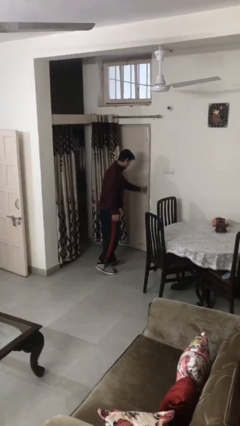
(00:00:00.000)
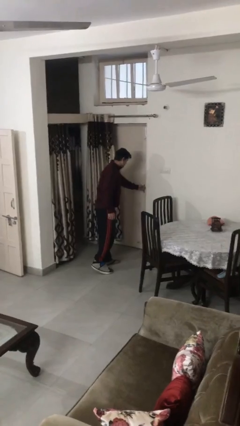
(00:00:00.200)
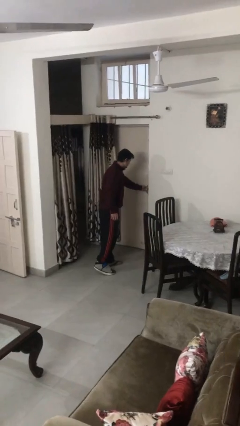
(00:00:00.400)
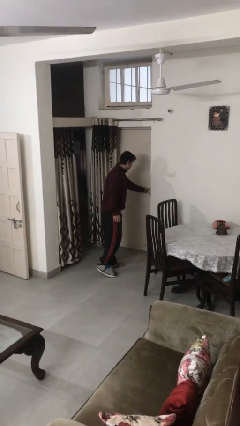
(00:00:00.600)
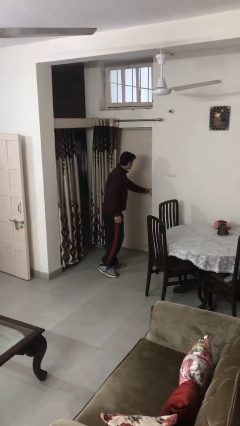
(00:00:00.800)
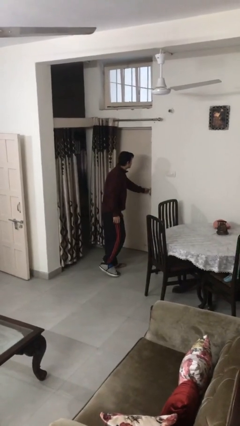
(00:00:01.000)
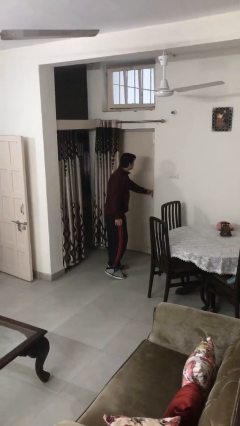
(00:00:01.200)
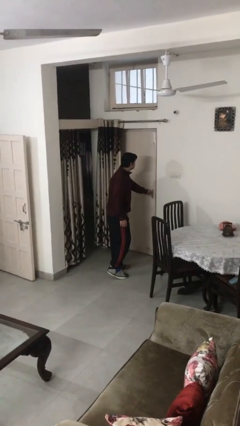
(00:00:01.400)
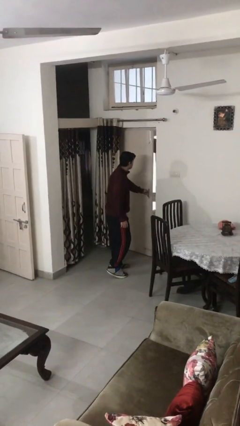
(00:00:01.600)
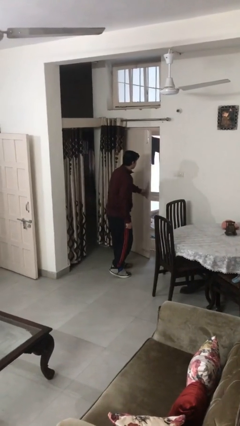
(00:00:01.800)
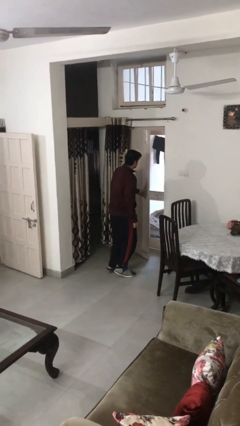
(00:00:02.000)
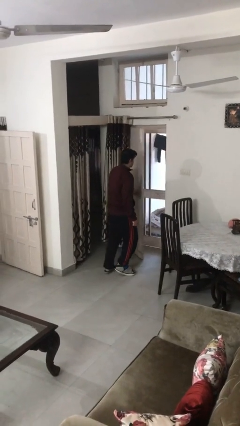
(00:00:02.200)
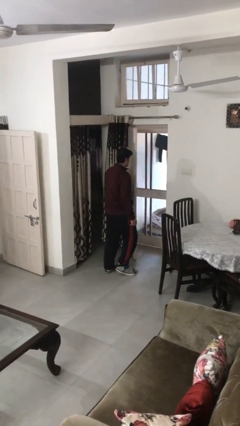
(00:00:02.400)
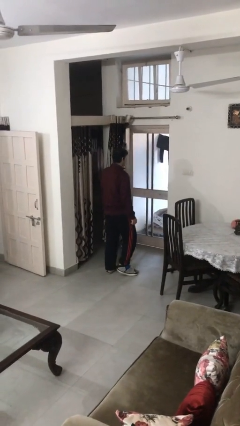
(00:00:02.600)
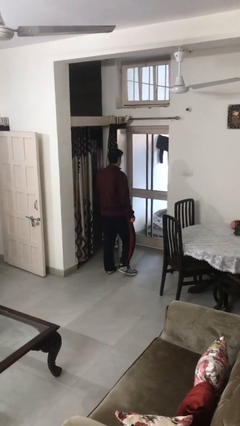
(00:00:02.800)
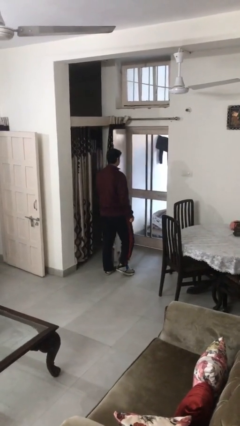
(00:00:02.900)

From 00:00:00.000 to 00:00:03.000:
person opens facility door

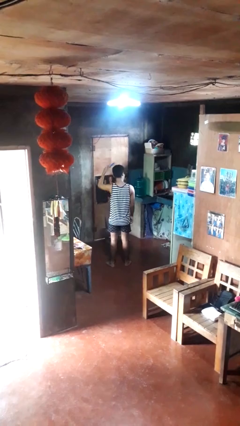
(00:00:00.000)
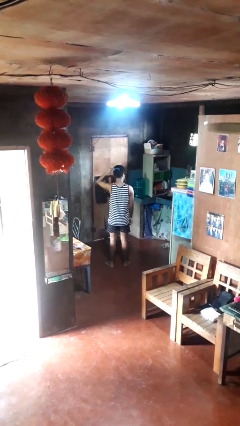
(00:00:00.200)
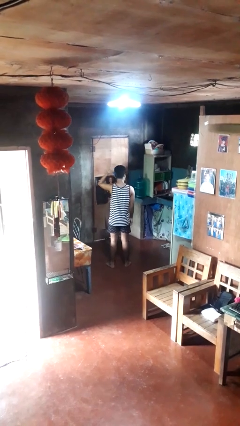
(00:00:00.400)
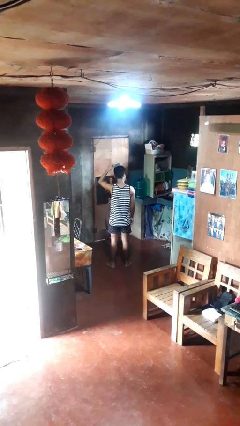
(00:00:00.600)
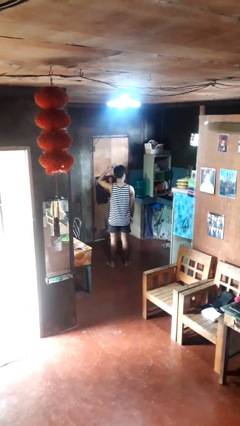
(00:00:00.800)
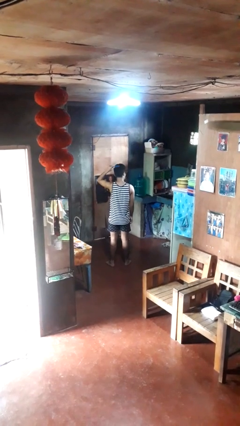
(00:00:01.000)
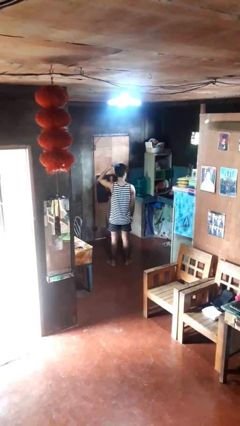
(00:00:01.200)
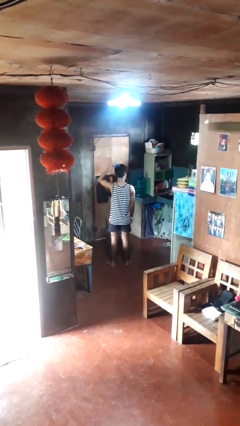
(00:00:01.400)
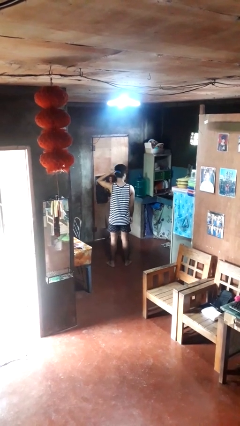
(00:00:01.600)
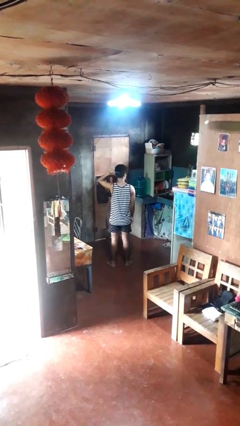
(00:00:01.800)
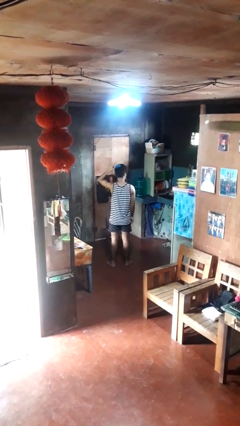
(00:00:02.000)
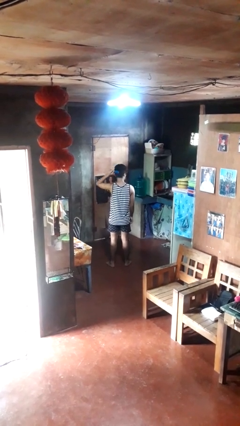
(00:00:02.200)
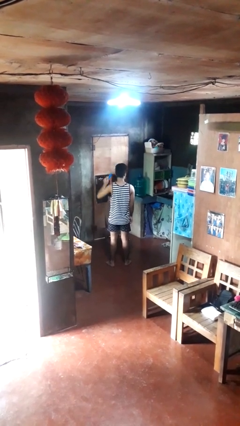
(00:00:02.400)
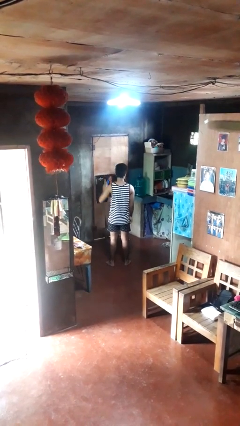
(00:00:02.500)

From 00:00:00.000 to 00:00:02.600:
person brushes hair

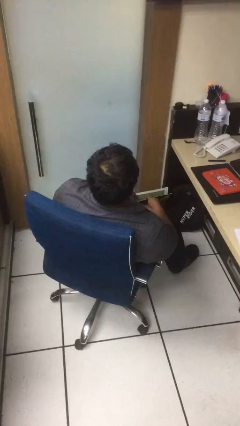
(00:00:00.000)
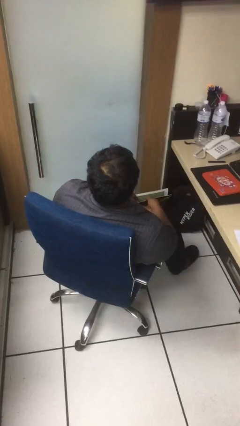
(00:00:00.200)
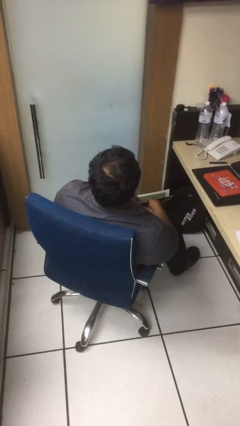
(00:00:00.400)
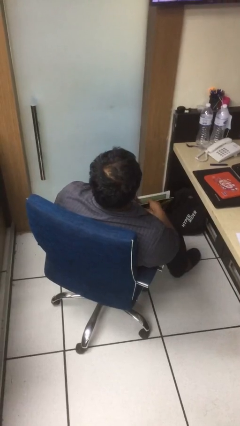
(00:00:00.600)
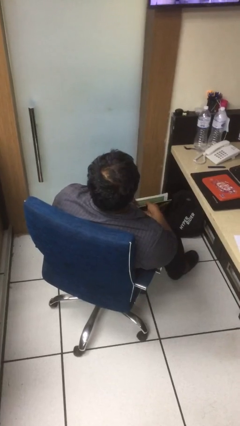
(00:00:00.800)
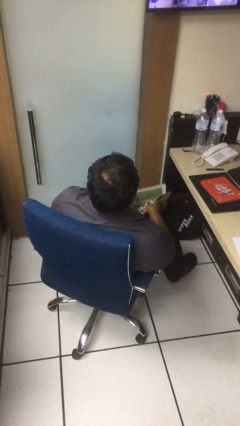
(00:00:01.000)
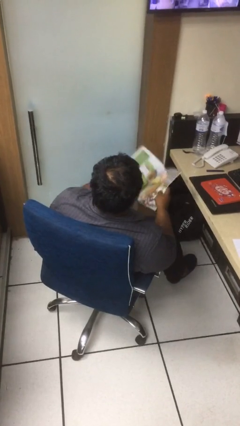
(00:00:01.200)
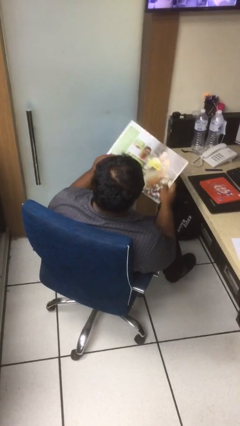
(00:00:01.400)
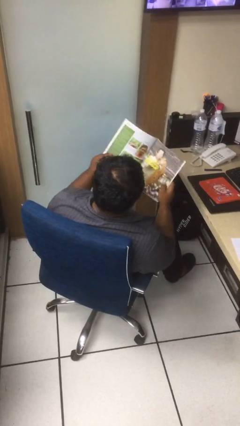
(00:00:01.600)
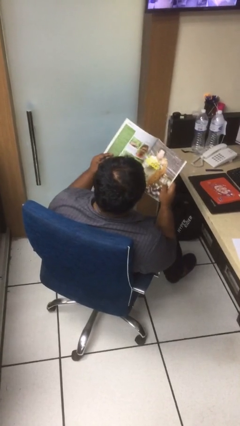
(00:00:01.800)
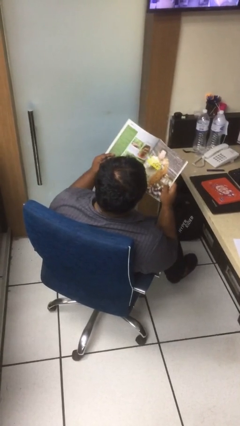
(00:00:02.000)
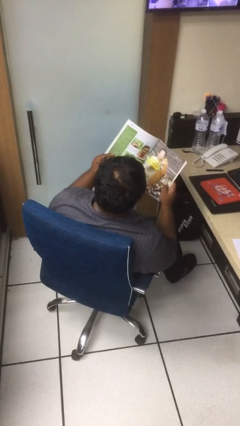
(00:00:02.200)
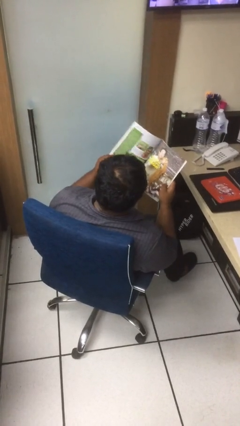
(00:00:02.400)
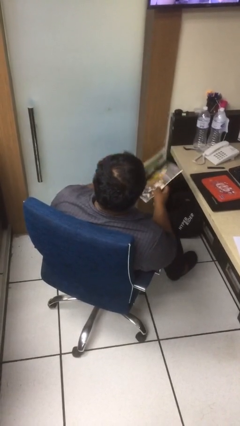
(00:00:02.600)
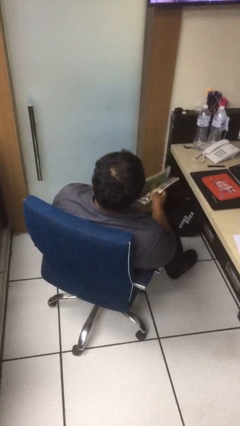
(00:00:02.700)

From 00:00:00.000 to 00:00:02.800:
person reads magazine

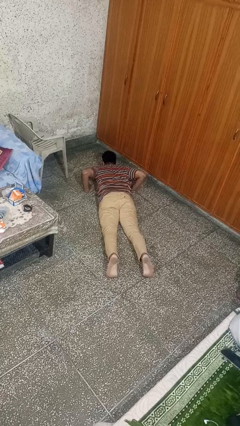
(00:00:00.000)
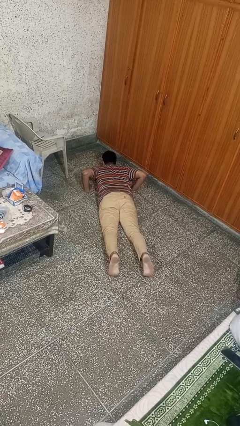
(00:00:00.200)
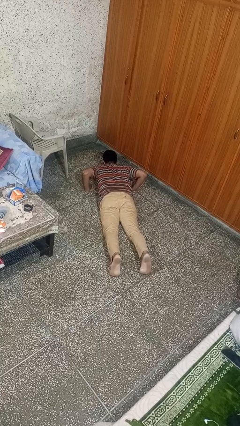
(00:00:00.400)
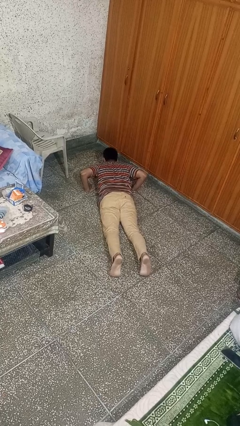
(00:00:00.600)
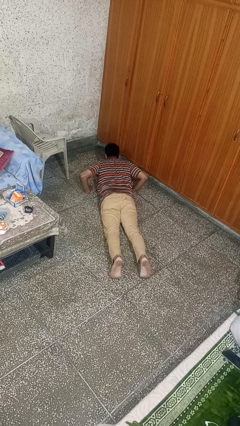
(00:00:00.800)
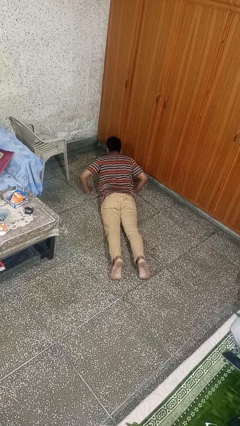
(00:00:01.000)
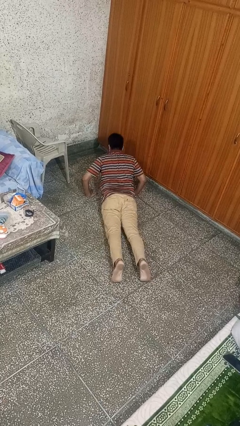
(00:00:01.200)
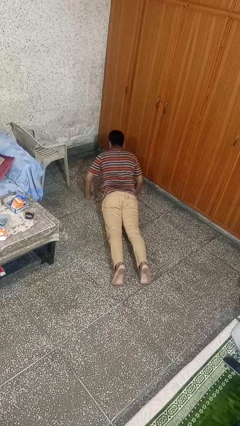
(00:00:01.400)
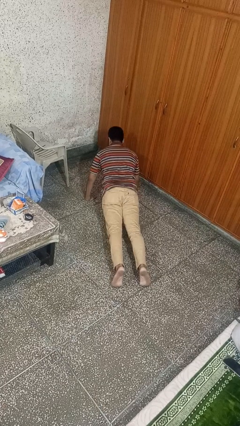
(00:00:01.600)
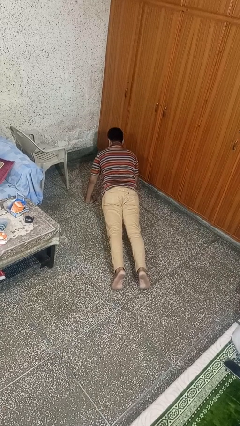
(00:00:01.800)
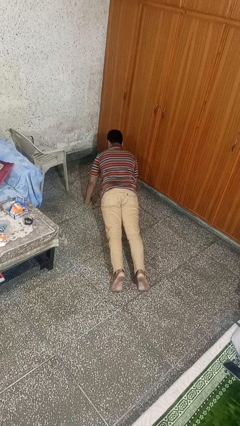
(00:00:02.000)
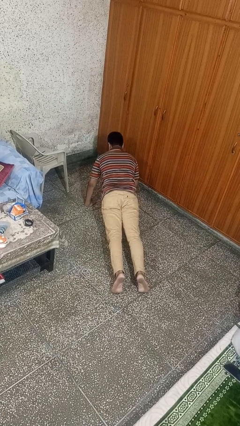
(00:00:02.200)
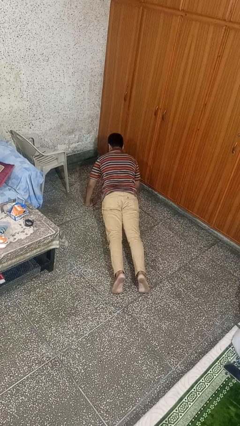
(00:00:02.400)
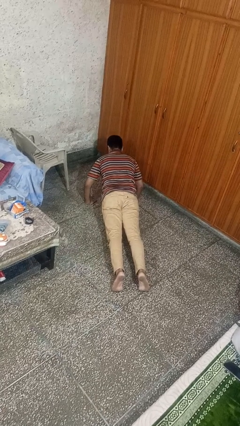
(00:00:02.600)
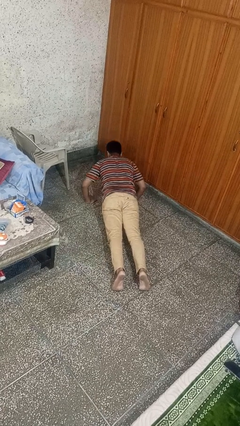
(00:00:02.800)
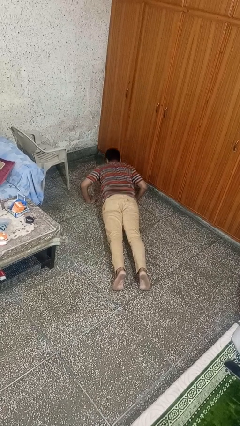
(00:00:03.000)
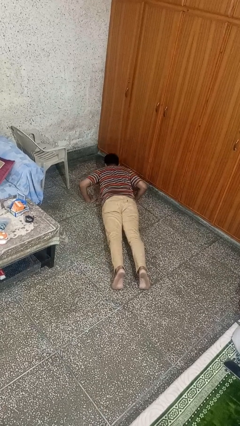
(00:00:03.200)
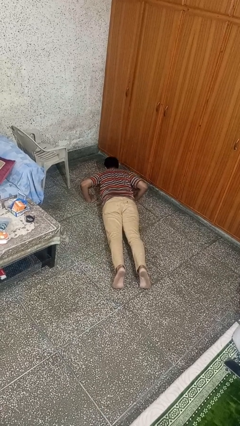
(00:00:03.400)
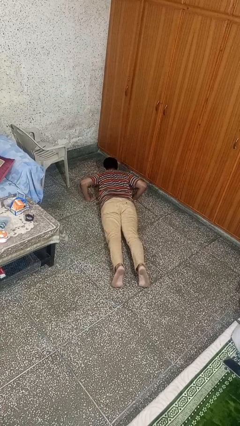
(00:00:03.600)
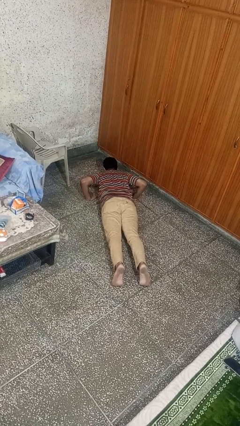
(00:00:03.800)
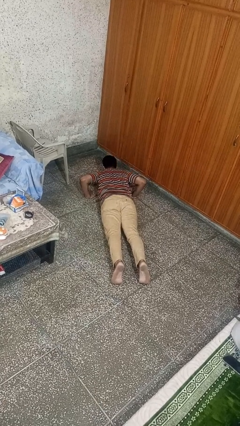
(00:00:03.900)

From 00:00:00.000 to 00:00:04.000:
person exercises with pushup

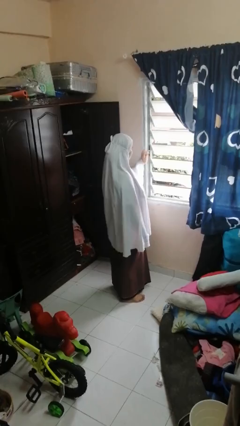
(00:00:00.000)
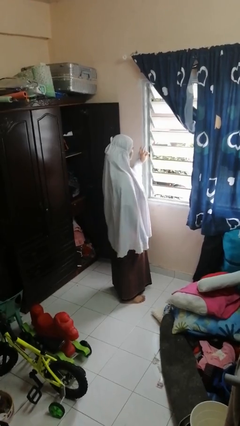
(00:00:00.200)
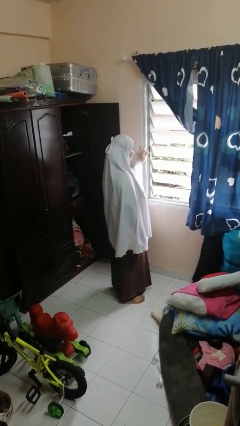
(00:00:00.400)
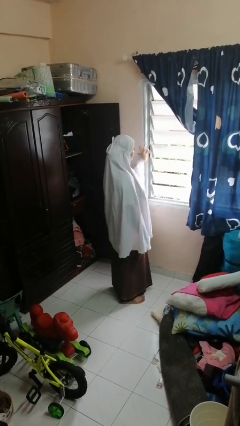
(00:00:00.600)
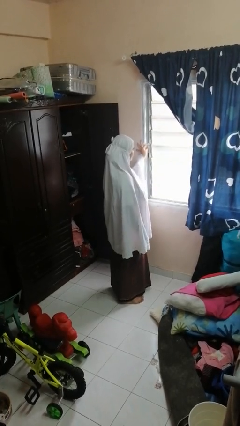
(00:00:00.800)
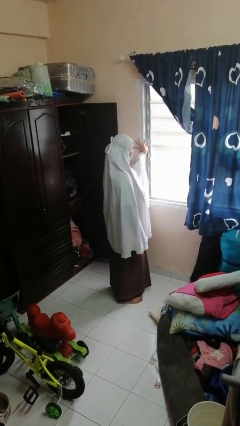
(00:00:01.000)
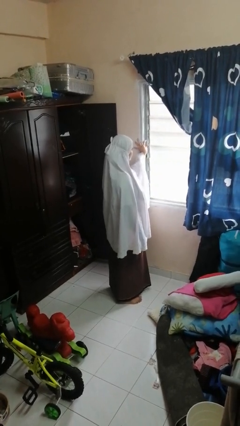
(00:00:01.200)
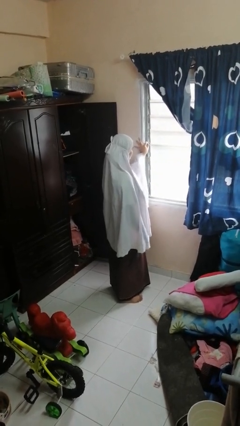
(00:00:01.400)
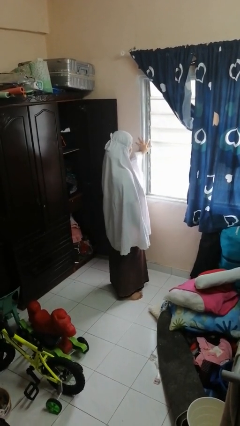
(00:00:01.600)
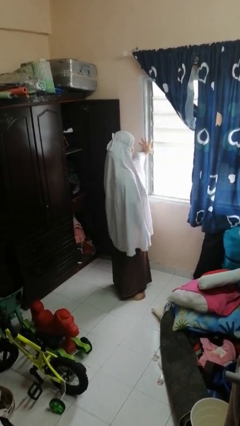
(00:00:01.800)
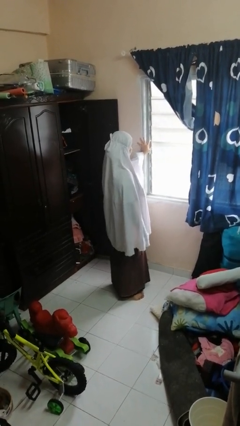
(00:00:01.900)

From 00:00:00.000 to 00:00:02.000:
person closes home window

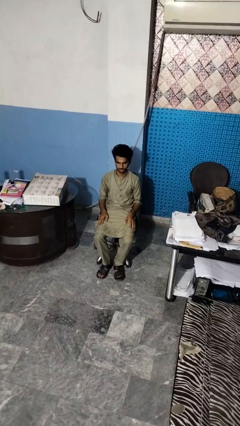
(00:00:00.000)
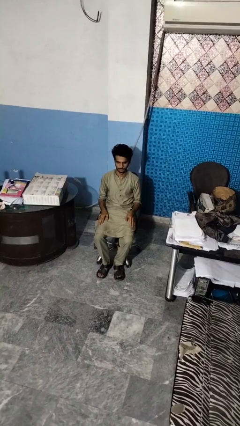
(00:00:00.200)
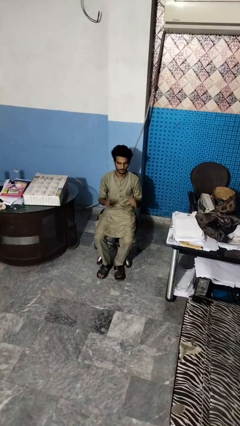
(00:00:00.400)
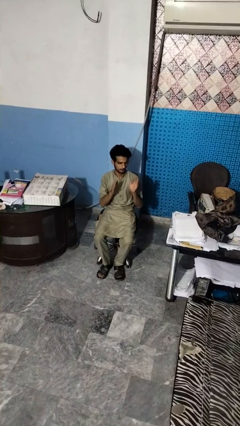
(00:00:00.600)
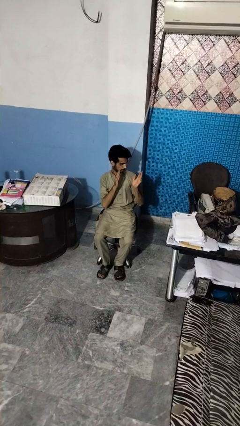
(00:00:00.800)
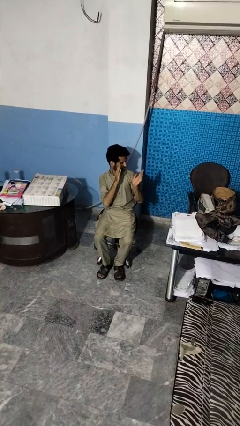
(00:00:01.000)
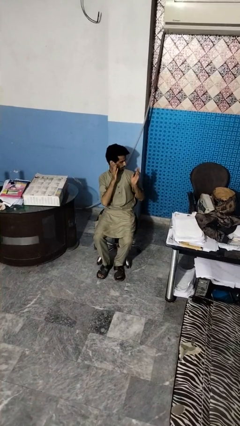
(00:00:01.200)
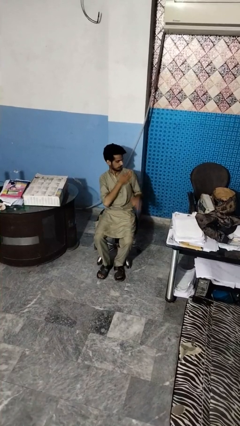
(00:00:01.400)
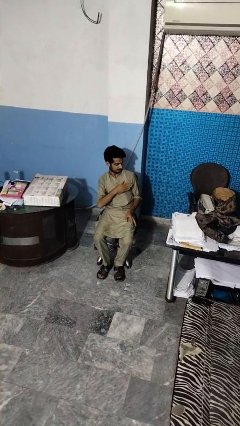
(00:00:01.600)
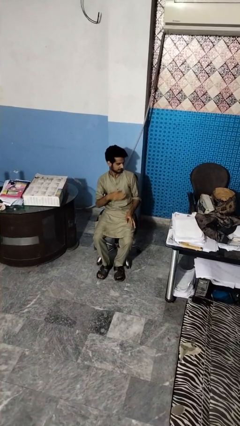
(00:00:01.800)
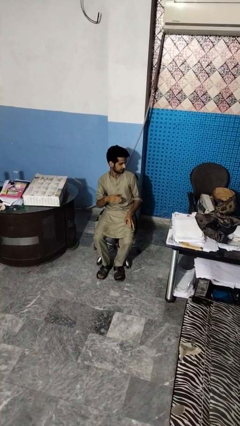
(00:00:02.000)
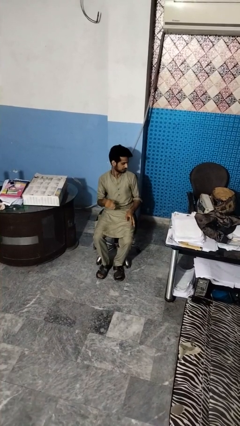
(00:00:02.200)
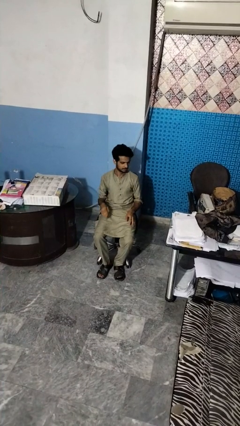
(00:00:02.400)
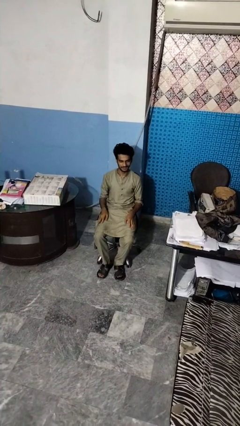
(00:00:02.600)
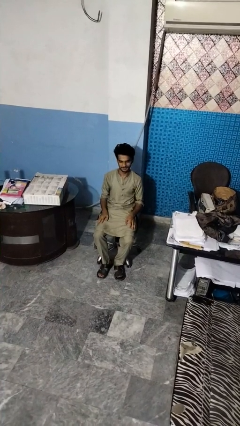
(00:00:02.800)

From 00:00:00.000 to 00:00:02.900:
person swats bug
